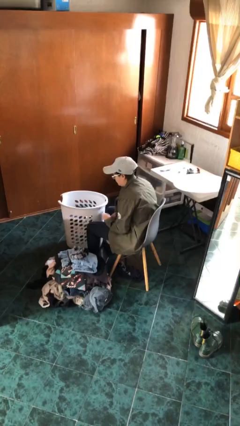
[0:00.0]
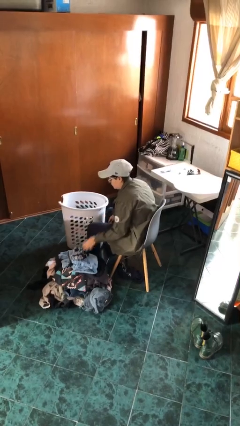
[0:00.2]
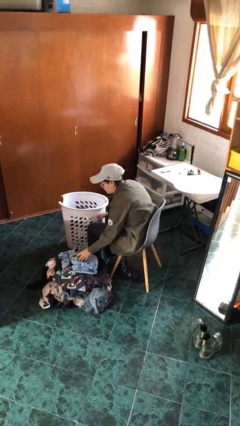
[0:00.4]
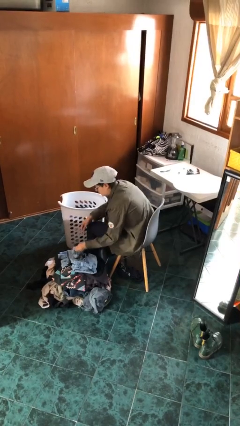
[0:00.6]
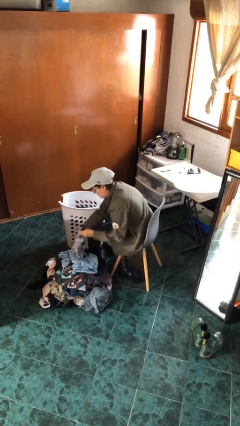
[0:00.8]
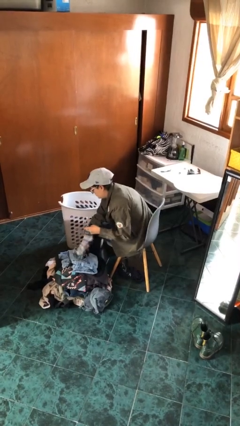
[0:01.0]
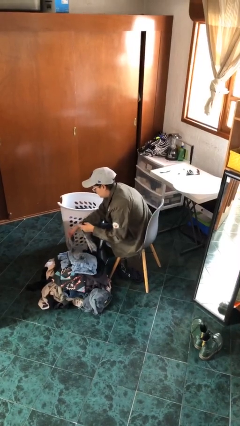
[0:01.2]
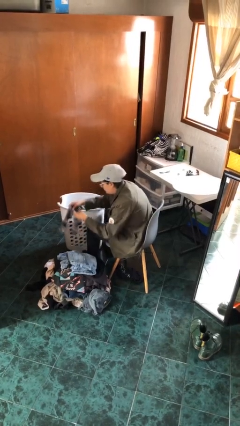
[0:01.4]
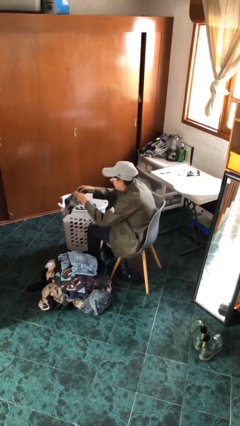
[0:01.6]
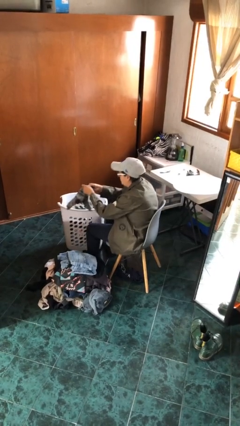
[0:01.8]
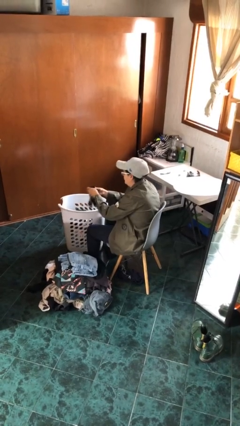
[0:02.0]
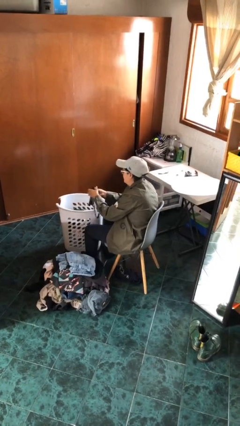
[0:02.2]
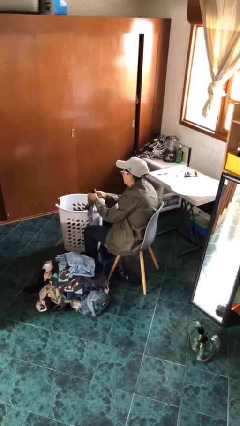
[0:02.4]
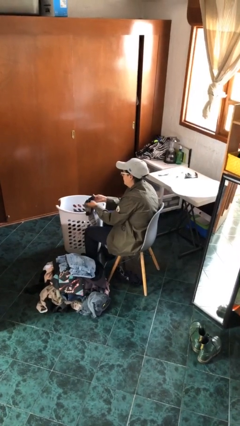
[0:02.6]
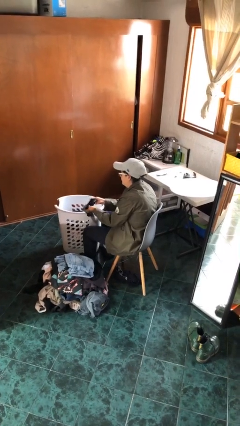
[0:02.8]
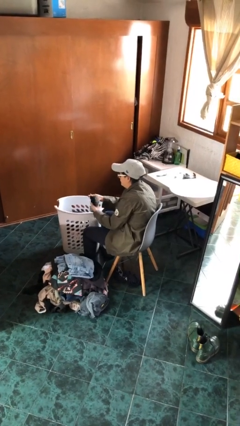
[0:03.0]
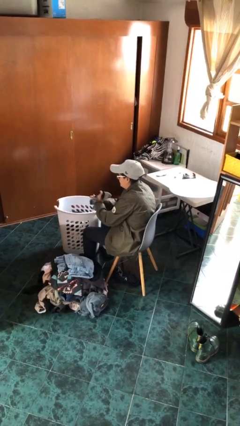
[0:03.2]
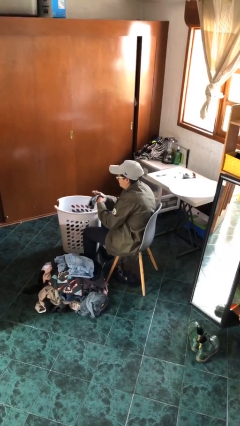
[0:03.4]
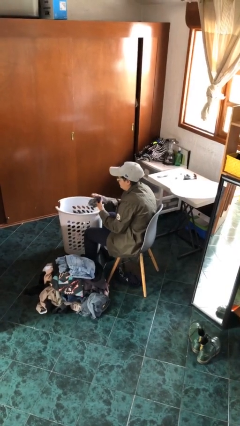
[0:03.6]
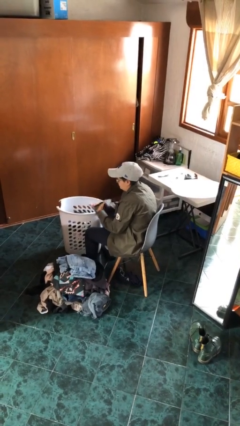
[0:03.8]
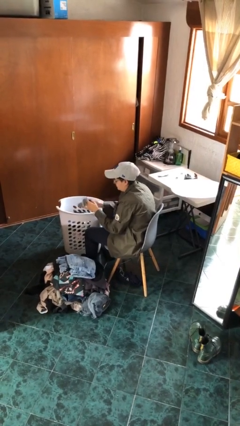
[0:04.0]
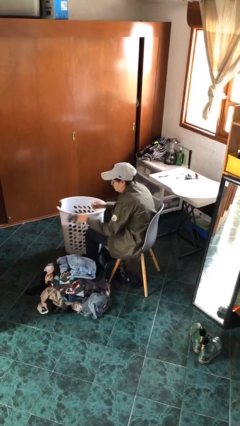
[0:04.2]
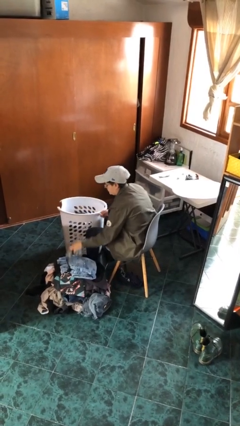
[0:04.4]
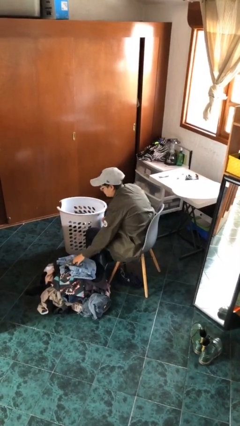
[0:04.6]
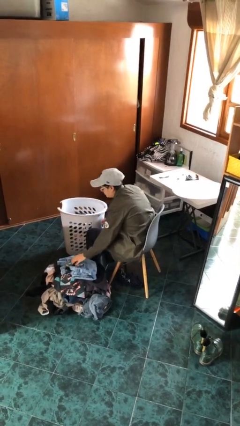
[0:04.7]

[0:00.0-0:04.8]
person folds socks

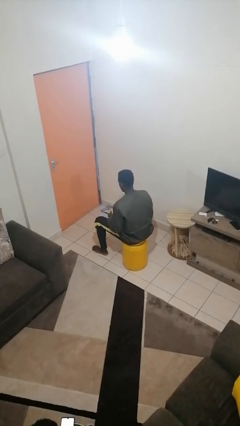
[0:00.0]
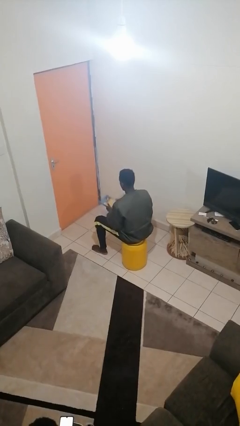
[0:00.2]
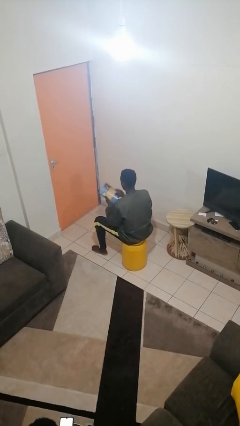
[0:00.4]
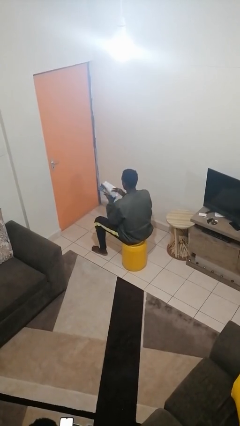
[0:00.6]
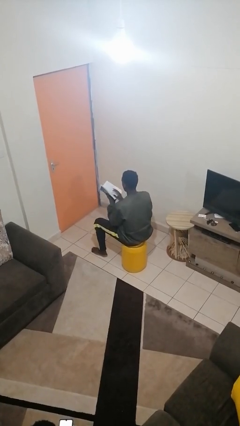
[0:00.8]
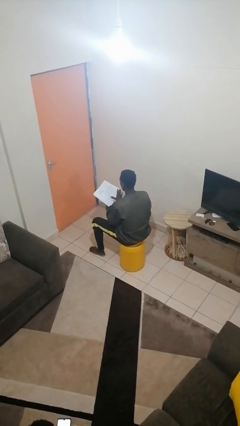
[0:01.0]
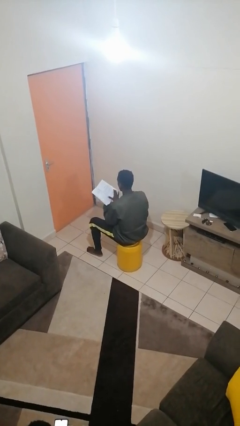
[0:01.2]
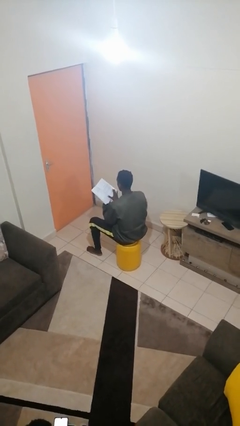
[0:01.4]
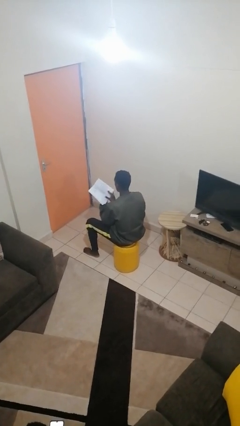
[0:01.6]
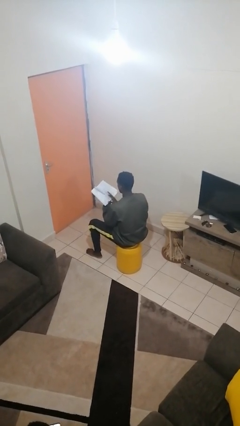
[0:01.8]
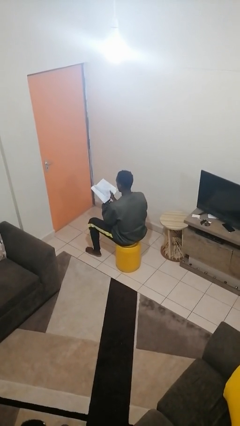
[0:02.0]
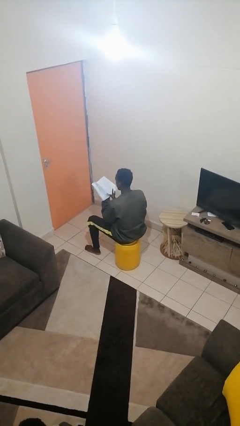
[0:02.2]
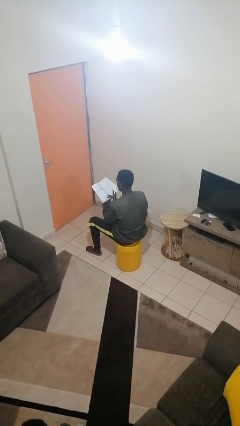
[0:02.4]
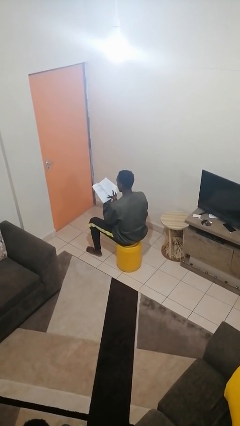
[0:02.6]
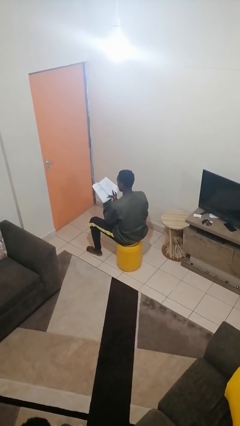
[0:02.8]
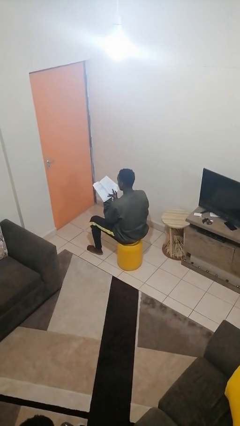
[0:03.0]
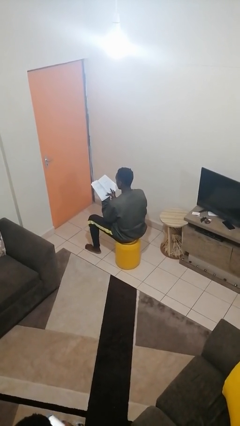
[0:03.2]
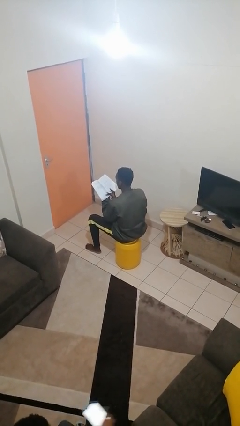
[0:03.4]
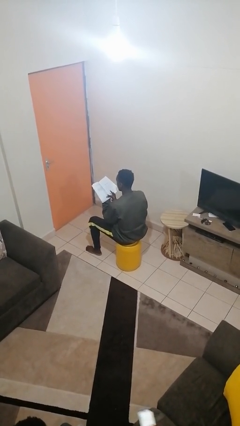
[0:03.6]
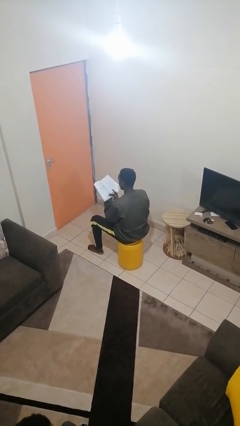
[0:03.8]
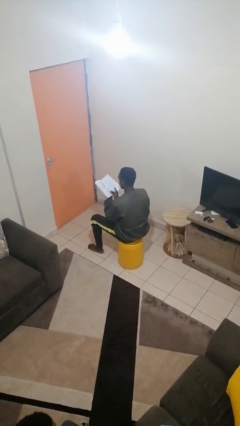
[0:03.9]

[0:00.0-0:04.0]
person reads book

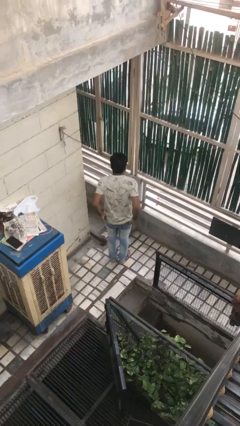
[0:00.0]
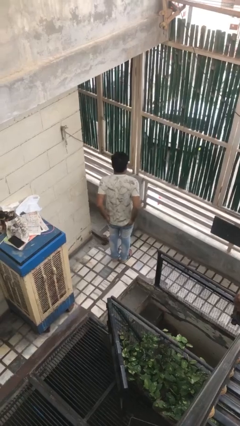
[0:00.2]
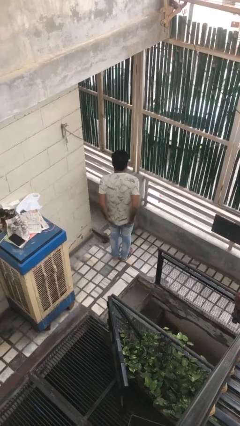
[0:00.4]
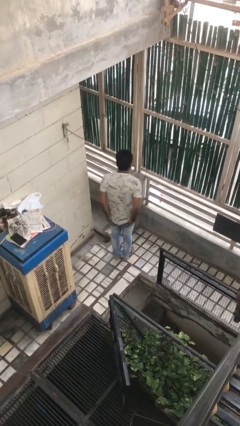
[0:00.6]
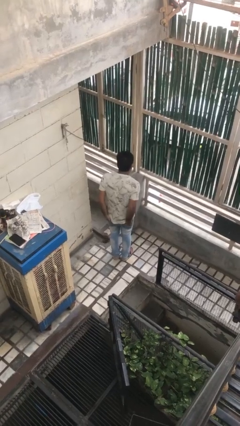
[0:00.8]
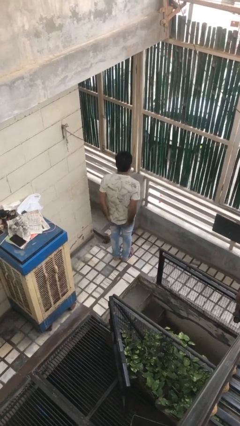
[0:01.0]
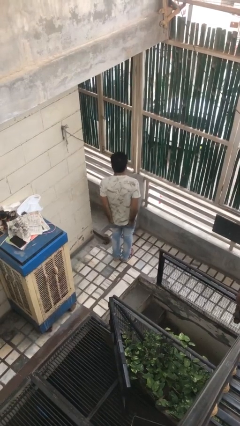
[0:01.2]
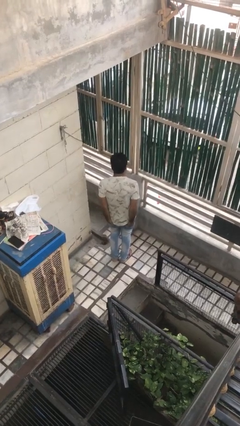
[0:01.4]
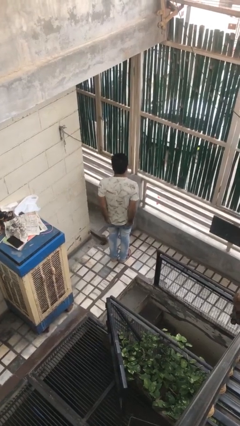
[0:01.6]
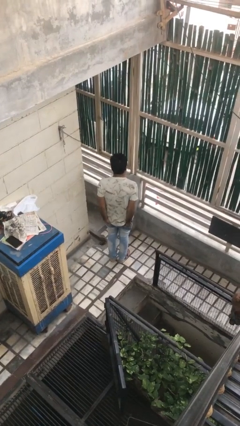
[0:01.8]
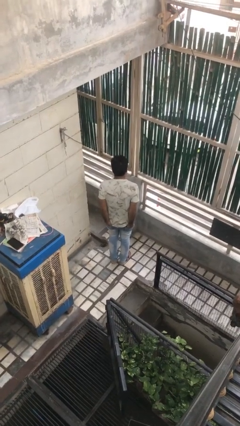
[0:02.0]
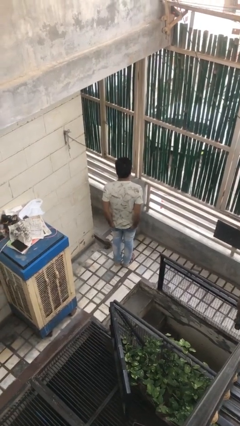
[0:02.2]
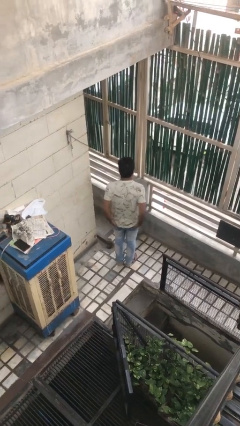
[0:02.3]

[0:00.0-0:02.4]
person puts hands in back pockets

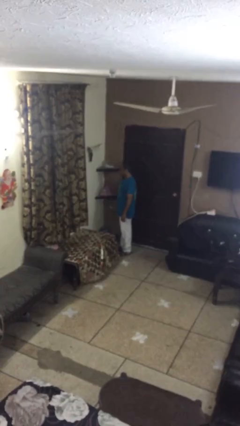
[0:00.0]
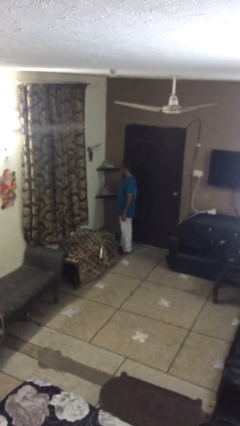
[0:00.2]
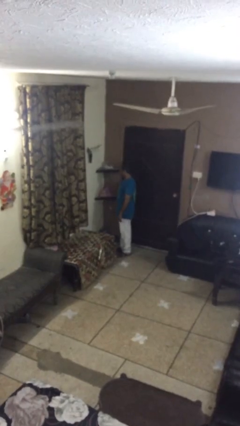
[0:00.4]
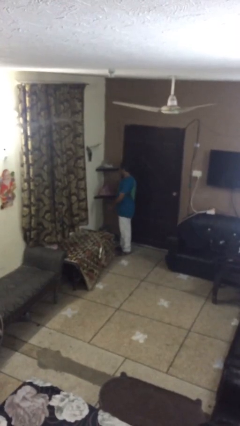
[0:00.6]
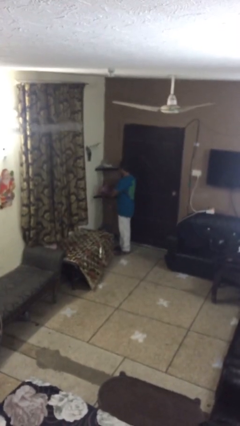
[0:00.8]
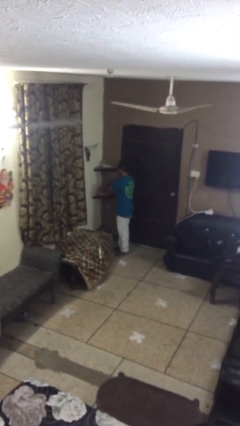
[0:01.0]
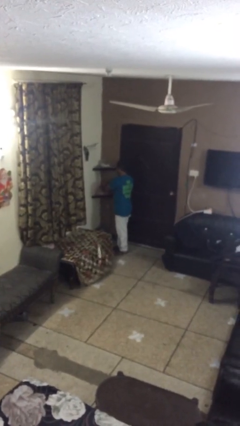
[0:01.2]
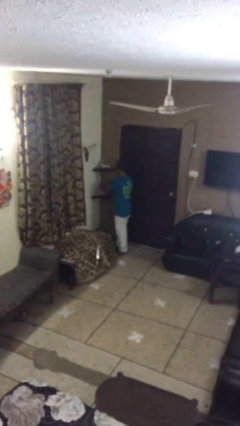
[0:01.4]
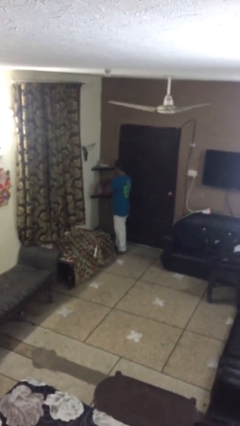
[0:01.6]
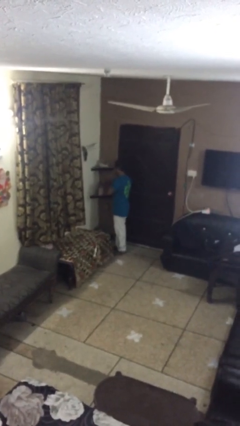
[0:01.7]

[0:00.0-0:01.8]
person picks up object from table

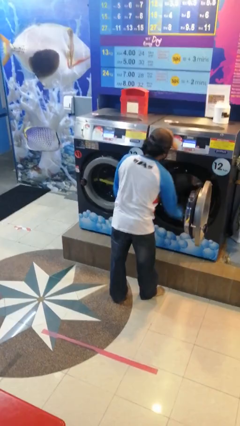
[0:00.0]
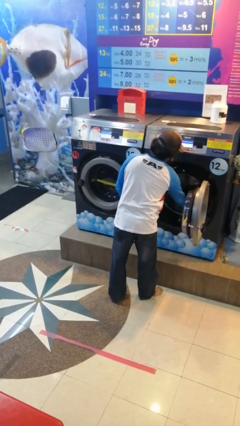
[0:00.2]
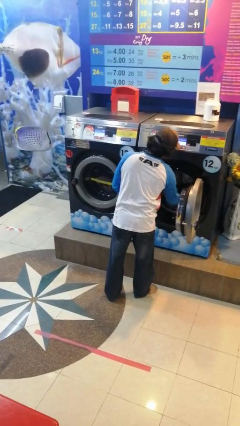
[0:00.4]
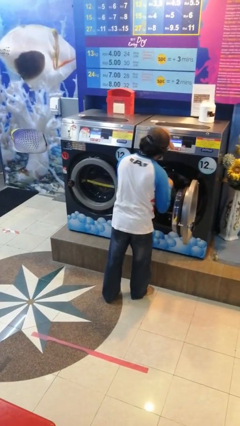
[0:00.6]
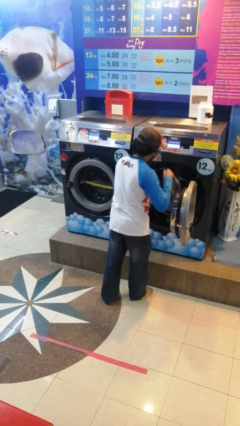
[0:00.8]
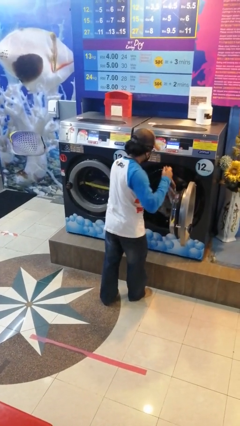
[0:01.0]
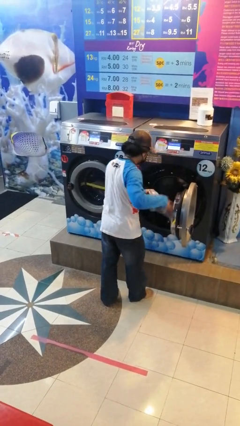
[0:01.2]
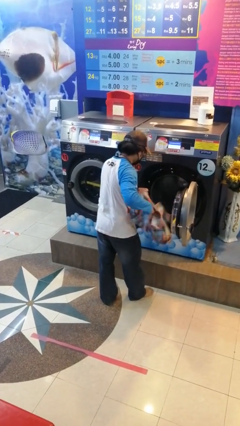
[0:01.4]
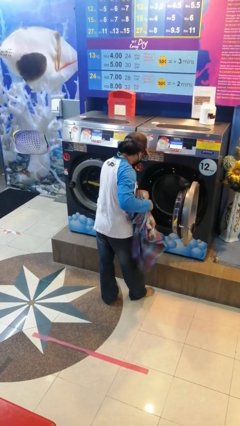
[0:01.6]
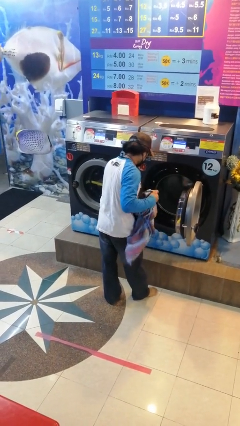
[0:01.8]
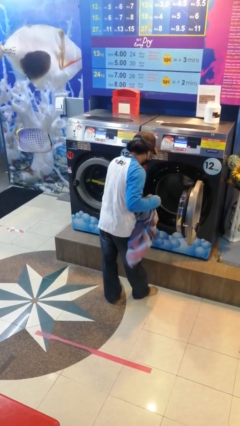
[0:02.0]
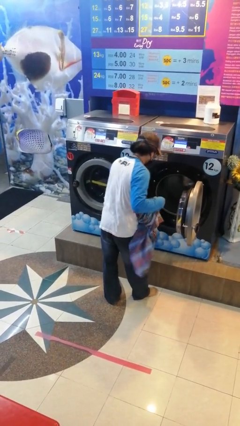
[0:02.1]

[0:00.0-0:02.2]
person unloads clotheswasher

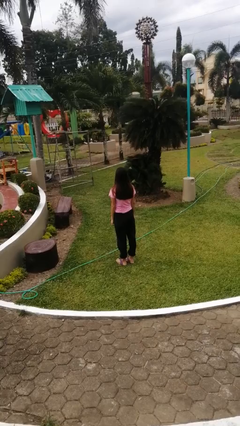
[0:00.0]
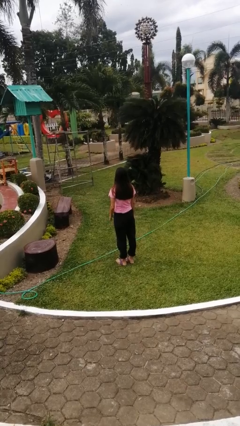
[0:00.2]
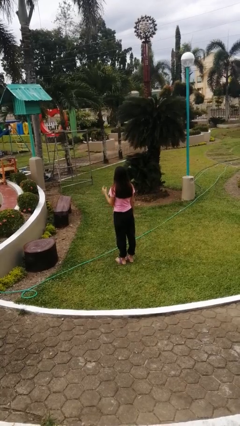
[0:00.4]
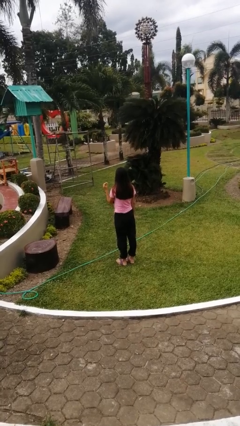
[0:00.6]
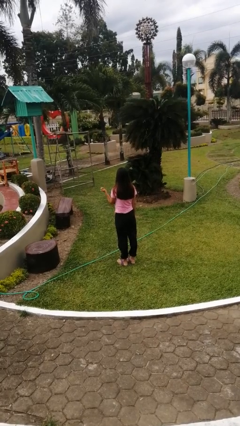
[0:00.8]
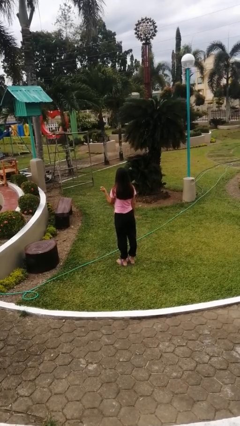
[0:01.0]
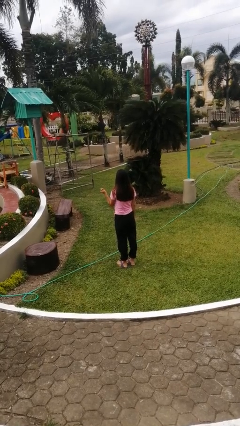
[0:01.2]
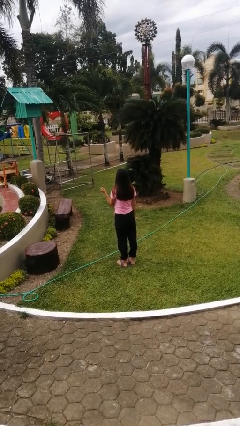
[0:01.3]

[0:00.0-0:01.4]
person snaps fingers

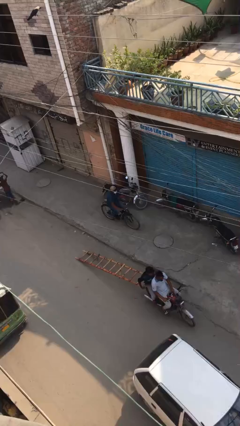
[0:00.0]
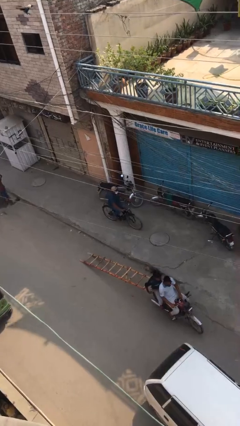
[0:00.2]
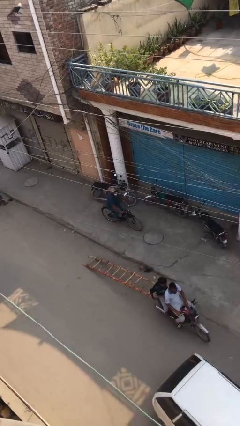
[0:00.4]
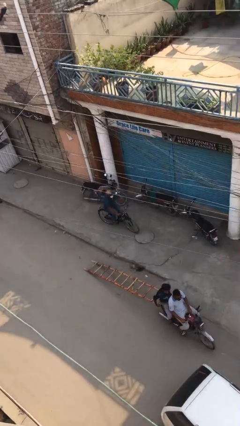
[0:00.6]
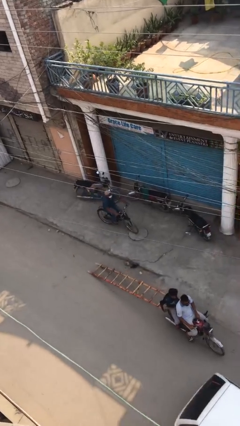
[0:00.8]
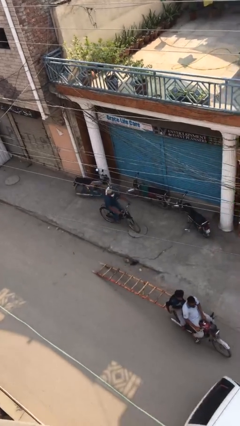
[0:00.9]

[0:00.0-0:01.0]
person rides bicycle
